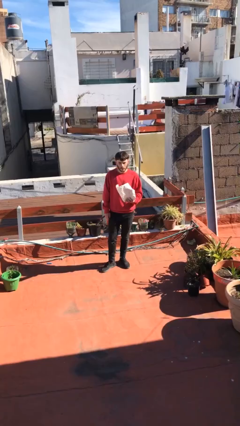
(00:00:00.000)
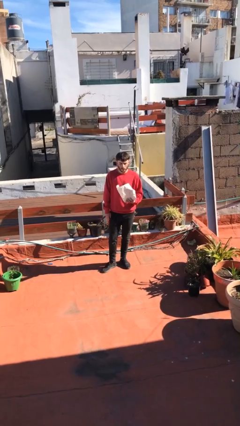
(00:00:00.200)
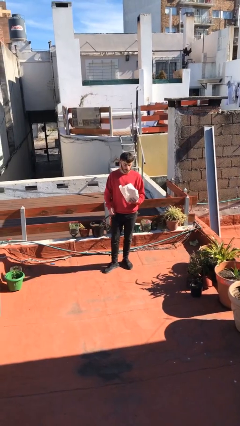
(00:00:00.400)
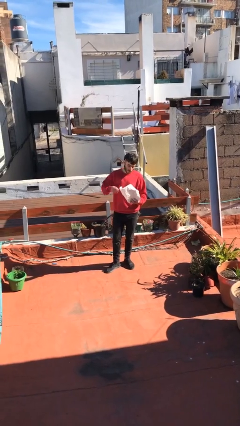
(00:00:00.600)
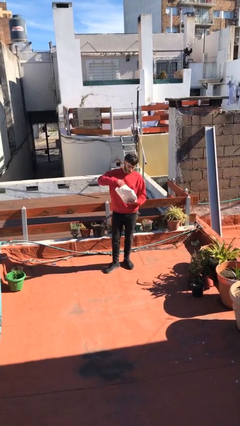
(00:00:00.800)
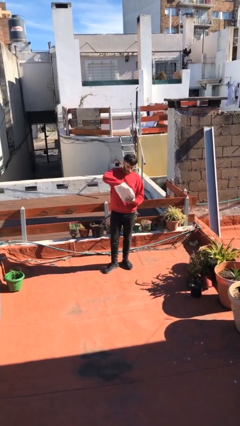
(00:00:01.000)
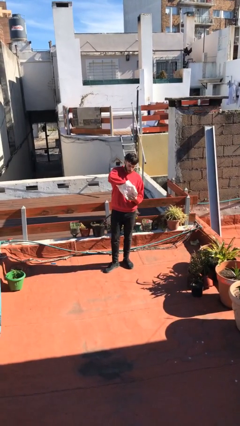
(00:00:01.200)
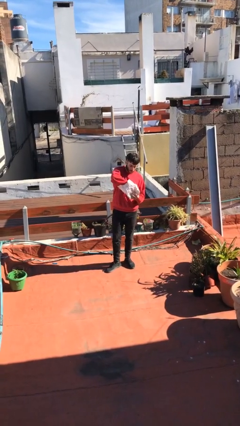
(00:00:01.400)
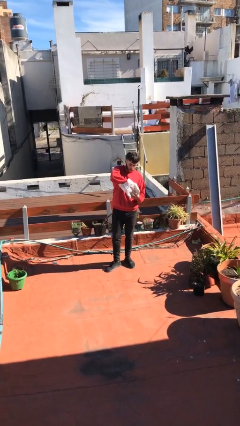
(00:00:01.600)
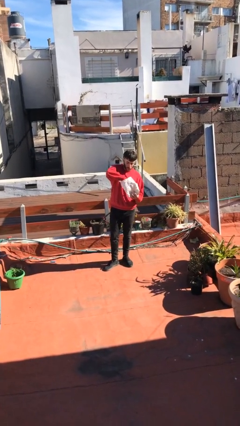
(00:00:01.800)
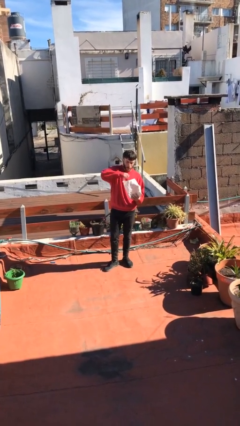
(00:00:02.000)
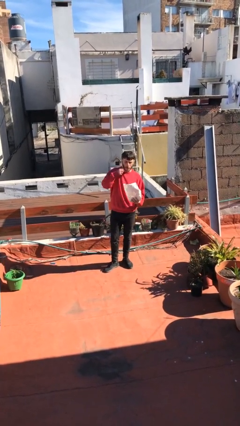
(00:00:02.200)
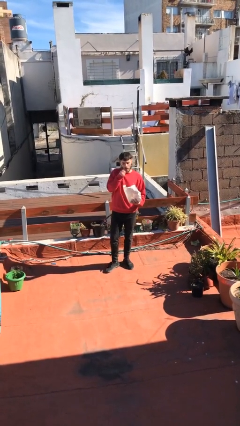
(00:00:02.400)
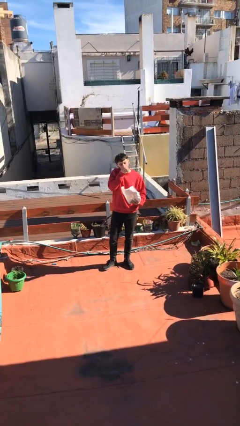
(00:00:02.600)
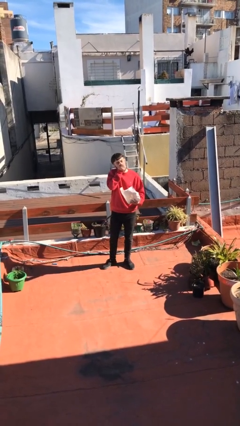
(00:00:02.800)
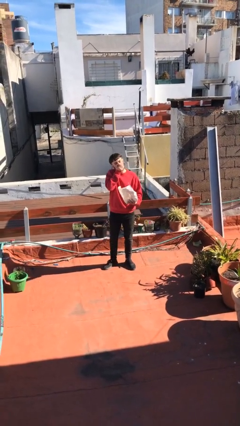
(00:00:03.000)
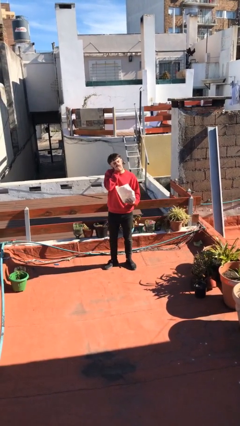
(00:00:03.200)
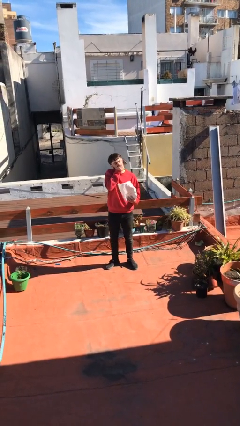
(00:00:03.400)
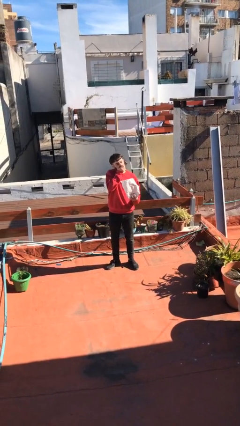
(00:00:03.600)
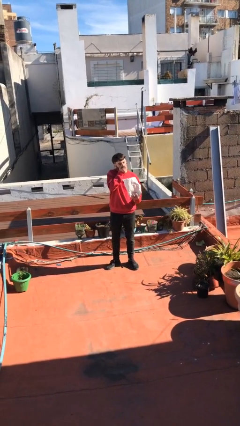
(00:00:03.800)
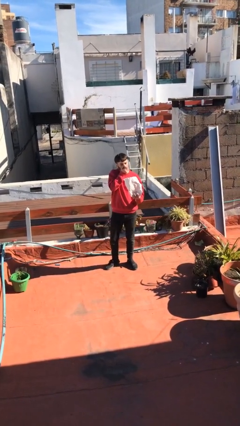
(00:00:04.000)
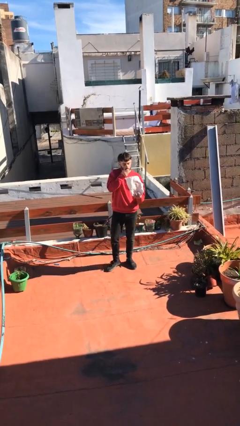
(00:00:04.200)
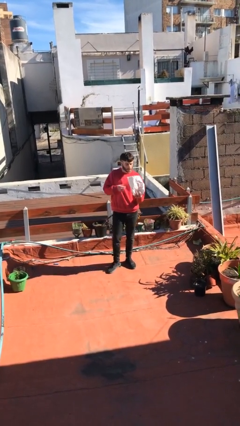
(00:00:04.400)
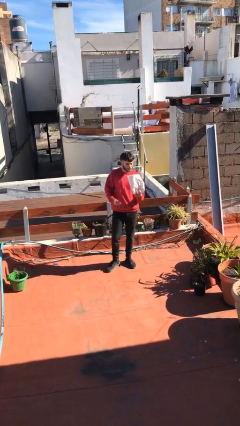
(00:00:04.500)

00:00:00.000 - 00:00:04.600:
person eats snack from bag

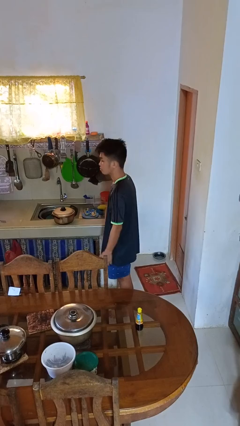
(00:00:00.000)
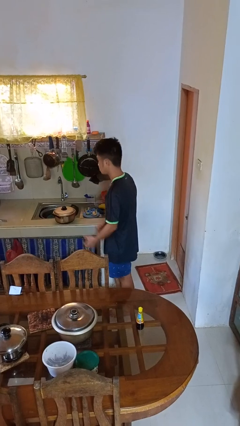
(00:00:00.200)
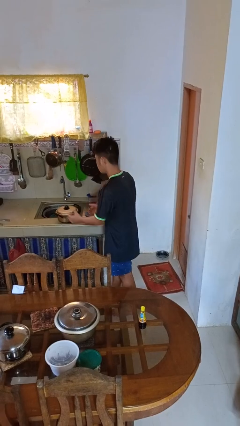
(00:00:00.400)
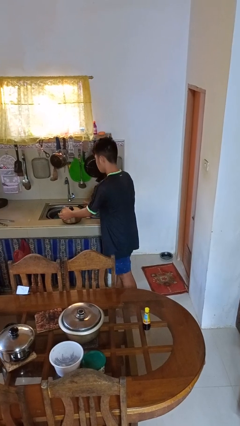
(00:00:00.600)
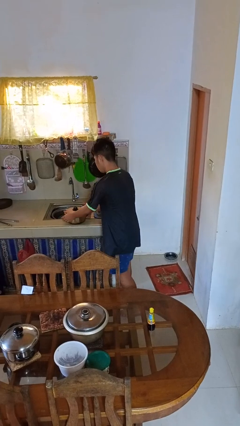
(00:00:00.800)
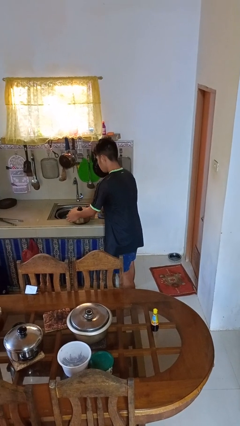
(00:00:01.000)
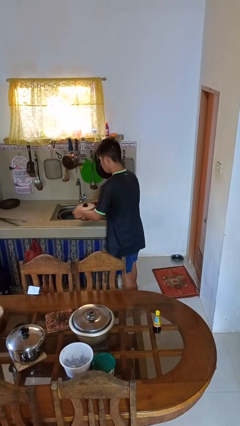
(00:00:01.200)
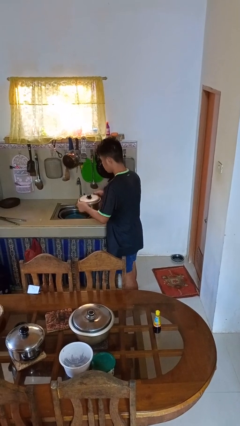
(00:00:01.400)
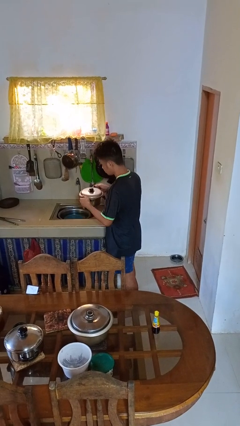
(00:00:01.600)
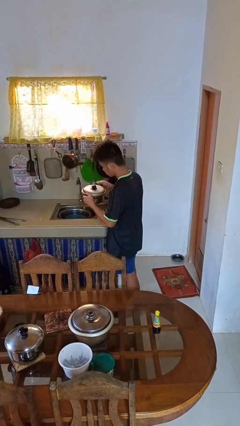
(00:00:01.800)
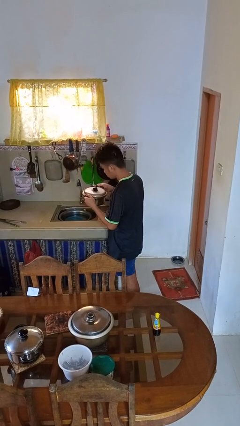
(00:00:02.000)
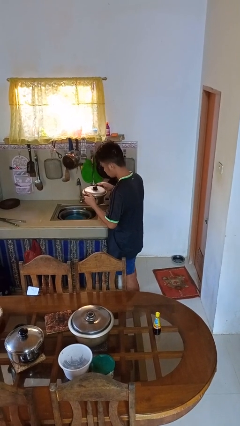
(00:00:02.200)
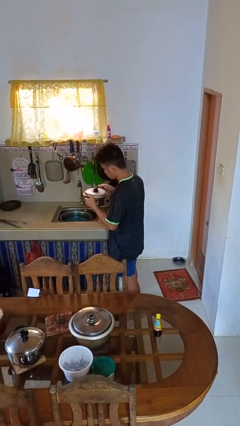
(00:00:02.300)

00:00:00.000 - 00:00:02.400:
person picks up object from countertop

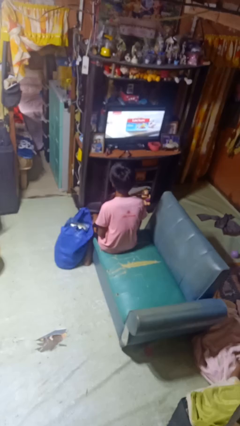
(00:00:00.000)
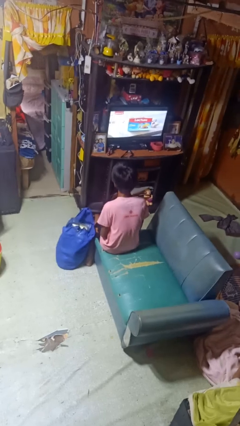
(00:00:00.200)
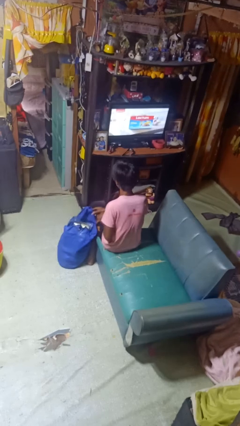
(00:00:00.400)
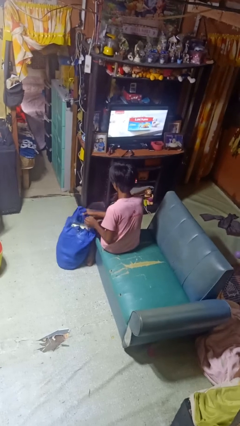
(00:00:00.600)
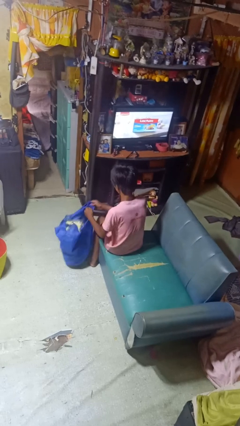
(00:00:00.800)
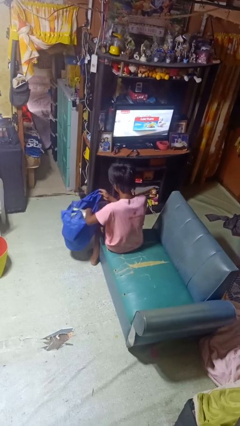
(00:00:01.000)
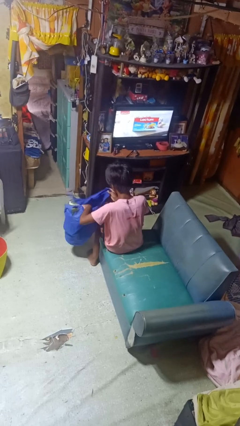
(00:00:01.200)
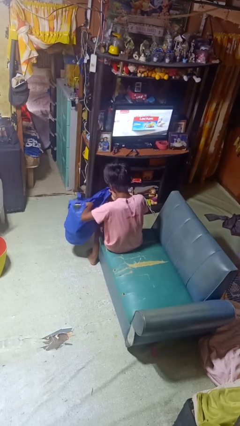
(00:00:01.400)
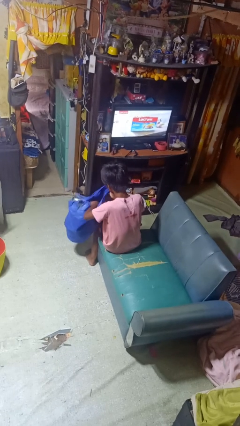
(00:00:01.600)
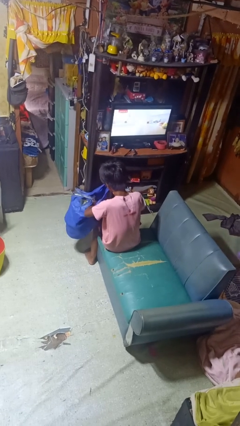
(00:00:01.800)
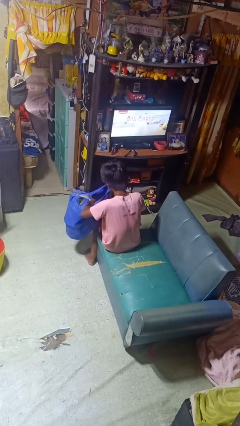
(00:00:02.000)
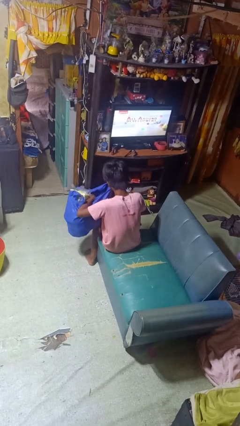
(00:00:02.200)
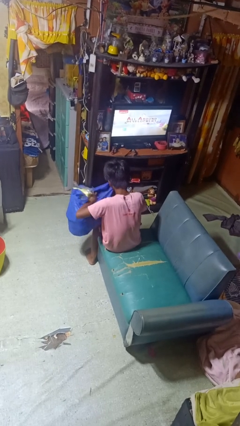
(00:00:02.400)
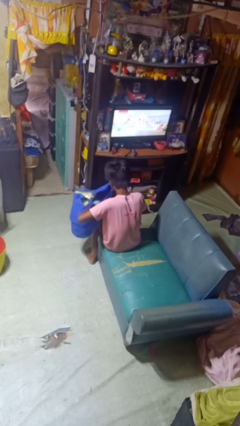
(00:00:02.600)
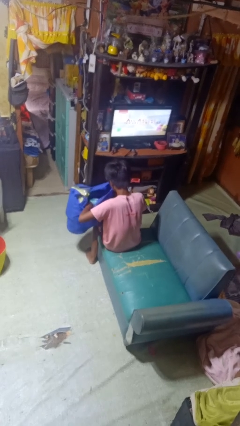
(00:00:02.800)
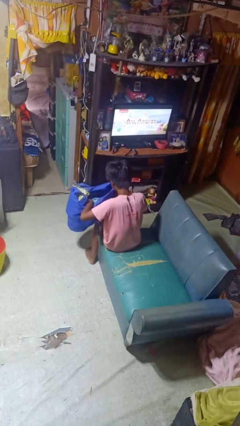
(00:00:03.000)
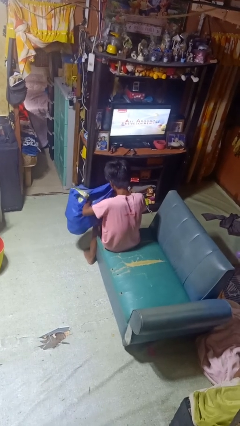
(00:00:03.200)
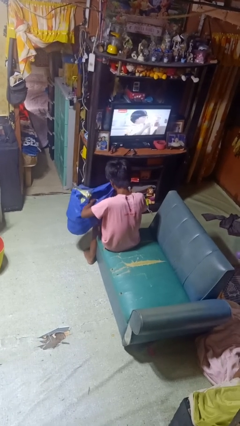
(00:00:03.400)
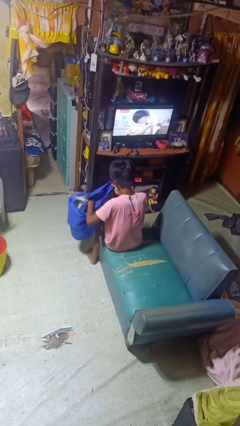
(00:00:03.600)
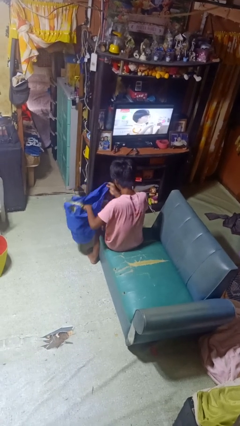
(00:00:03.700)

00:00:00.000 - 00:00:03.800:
person searches in bag

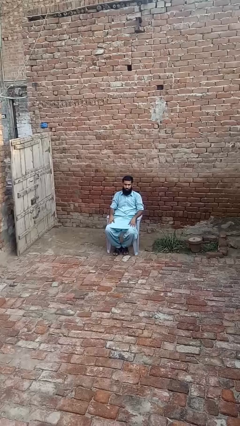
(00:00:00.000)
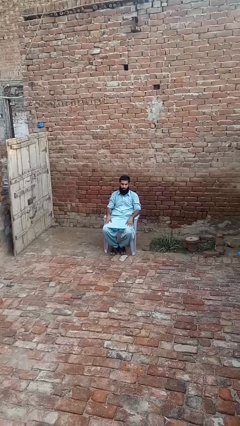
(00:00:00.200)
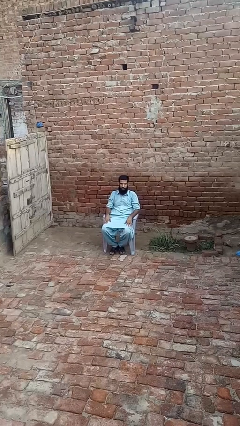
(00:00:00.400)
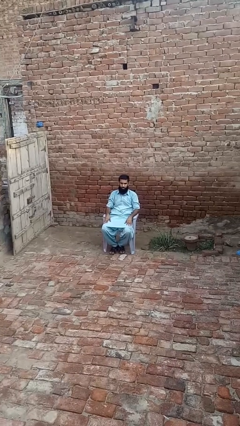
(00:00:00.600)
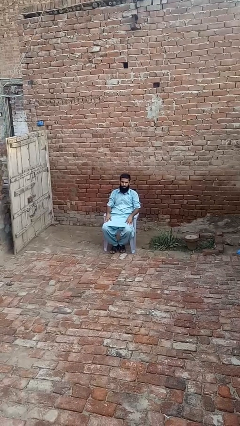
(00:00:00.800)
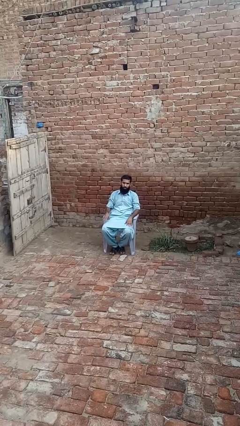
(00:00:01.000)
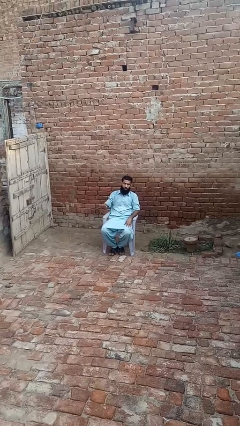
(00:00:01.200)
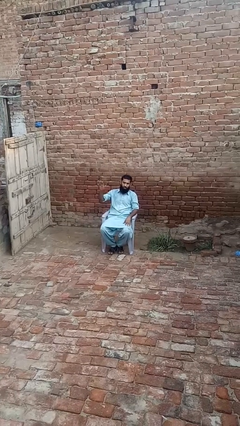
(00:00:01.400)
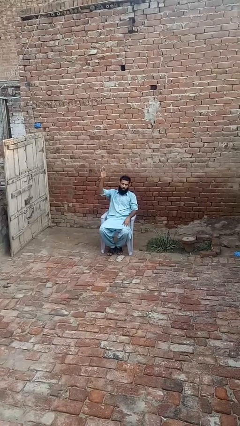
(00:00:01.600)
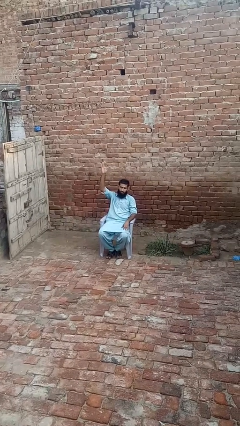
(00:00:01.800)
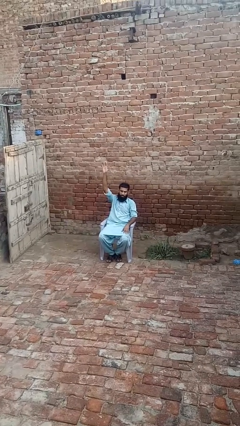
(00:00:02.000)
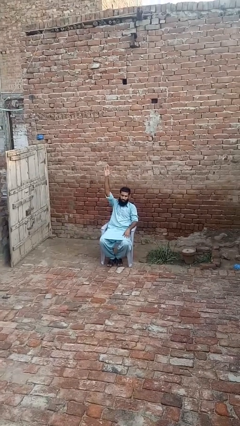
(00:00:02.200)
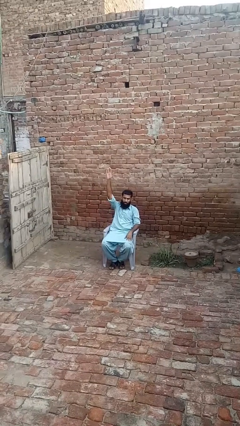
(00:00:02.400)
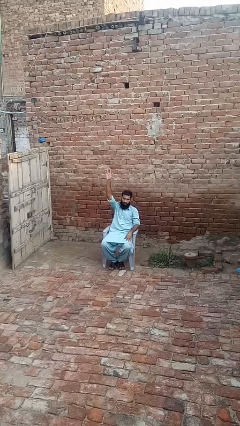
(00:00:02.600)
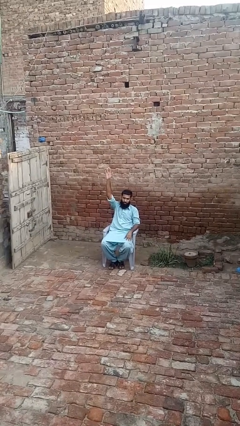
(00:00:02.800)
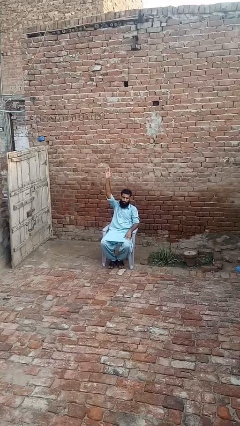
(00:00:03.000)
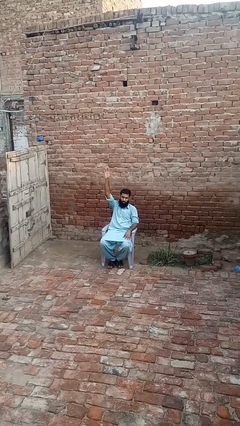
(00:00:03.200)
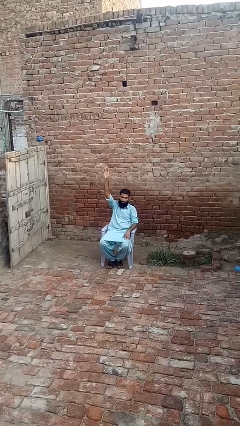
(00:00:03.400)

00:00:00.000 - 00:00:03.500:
person gestures raise hand

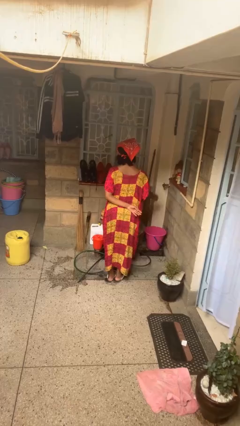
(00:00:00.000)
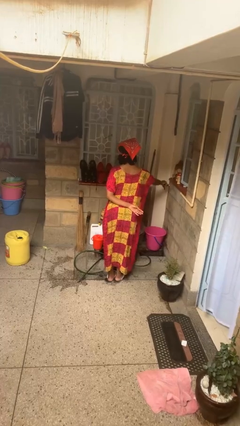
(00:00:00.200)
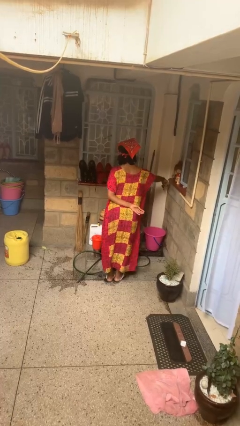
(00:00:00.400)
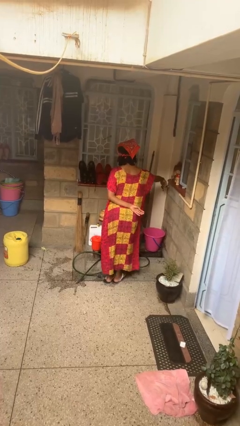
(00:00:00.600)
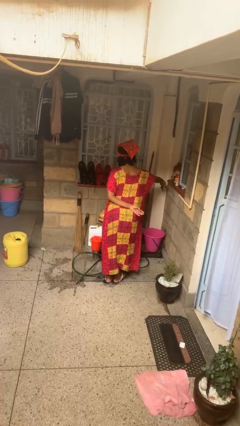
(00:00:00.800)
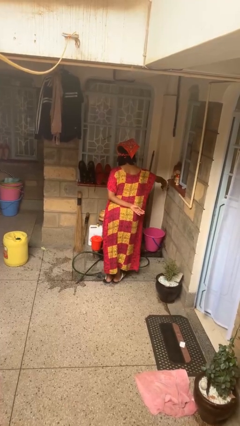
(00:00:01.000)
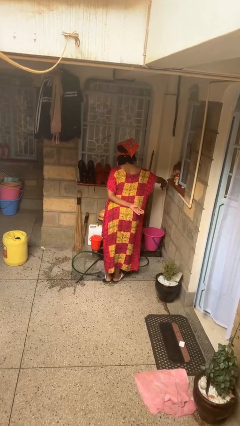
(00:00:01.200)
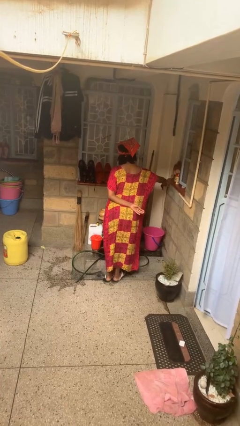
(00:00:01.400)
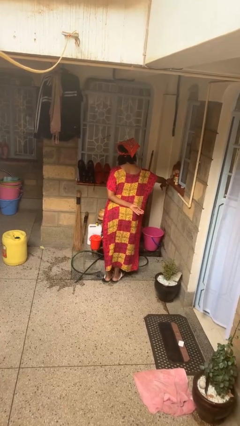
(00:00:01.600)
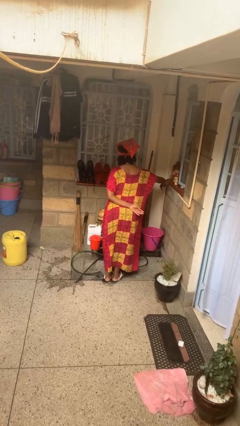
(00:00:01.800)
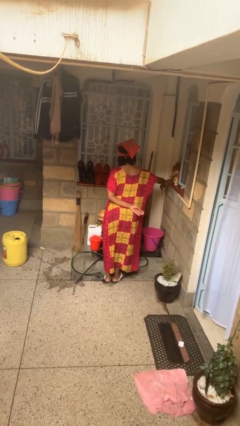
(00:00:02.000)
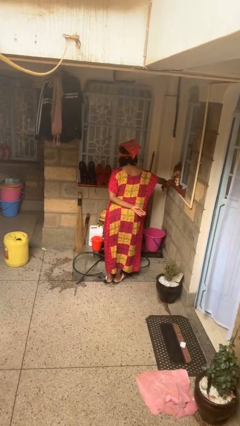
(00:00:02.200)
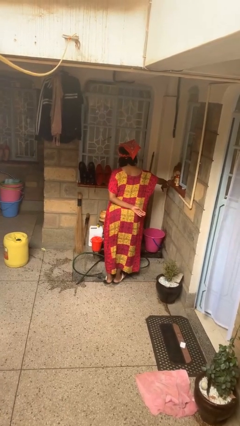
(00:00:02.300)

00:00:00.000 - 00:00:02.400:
person turns on faucet
